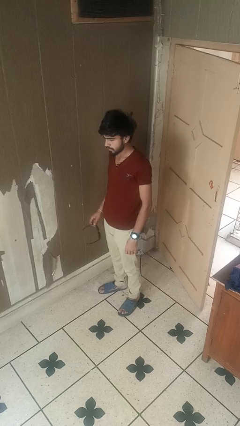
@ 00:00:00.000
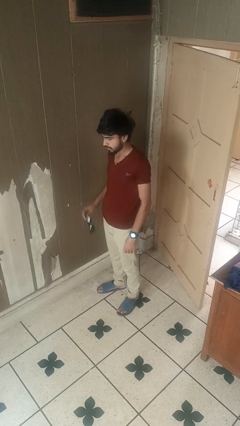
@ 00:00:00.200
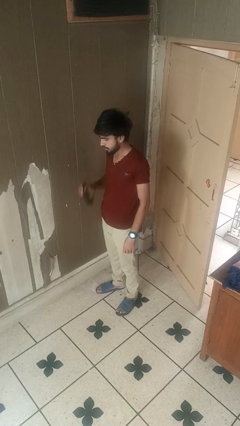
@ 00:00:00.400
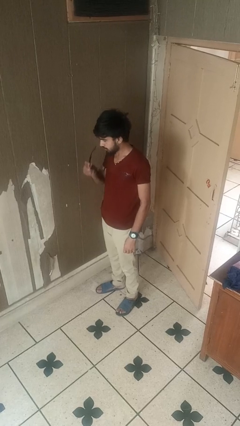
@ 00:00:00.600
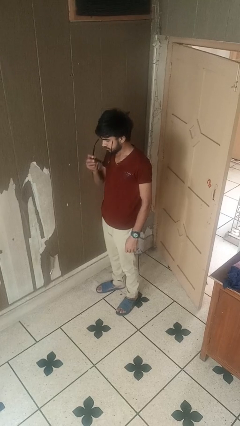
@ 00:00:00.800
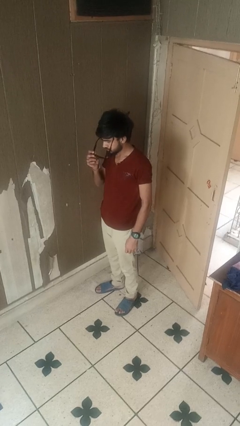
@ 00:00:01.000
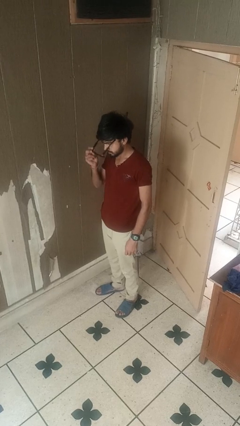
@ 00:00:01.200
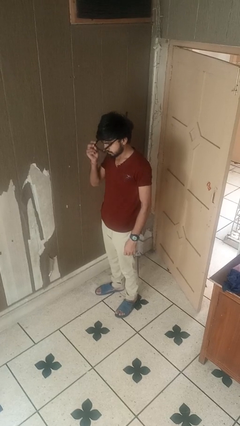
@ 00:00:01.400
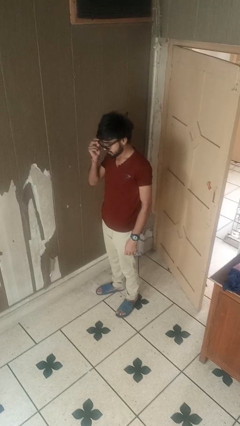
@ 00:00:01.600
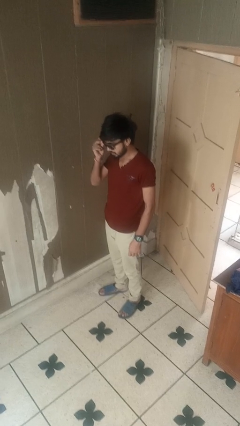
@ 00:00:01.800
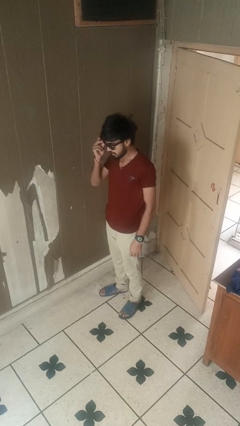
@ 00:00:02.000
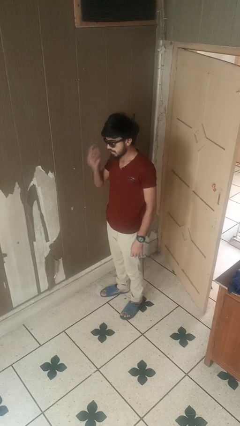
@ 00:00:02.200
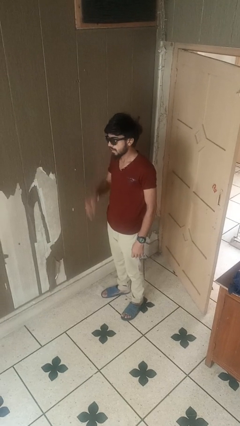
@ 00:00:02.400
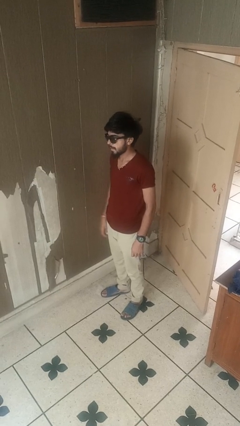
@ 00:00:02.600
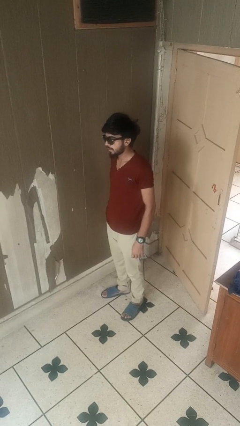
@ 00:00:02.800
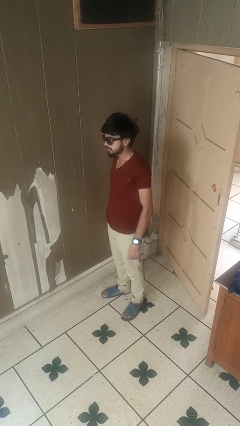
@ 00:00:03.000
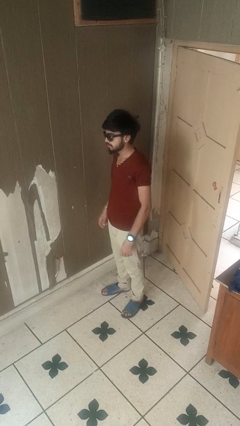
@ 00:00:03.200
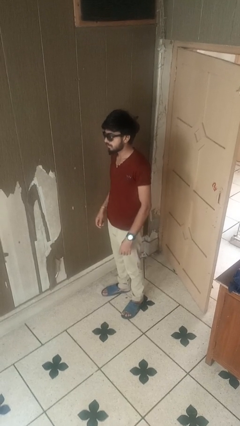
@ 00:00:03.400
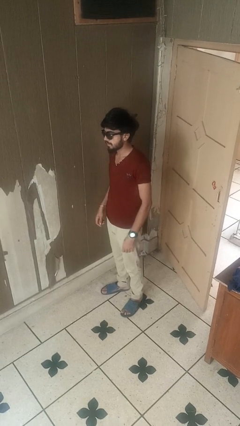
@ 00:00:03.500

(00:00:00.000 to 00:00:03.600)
person puts on sunglasses

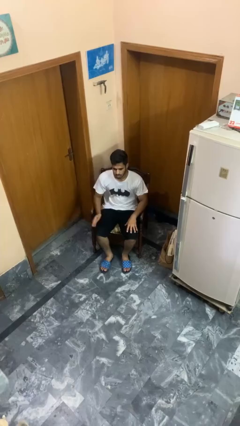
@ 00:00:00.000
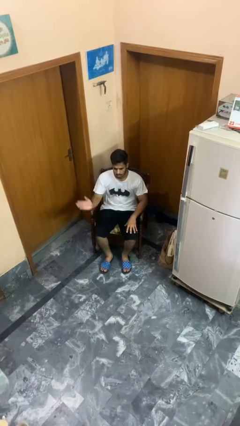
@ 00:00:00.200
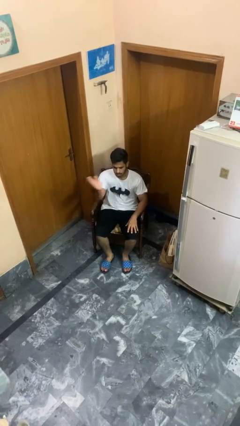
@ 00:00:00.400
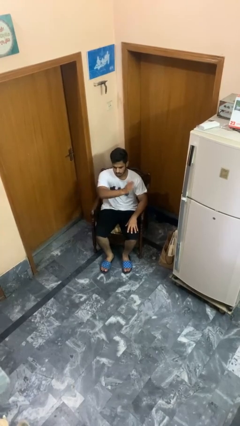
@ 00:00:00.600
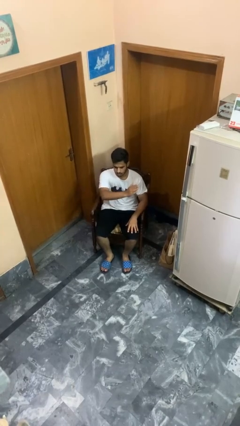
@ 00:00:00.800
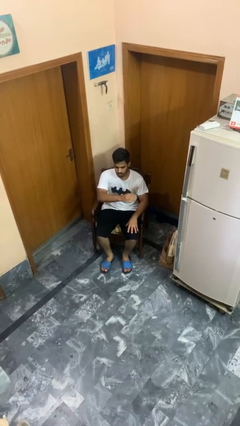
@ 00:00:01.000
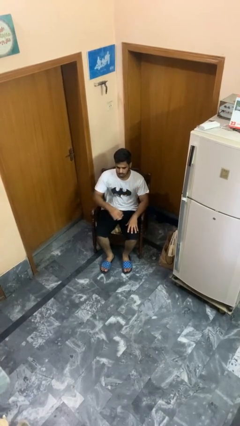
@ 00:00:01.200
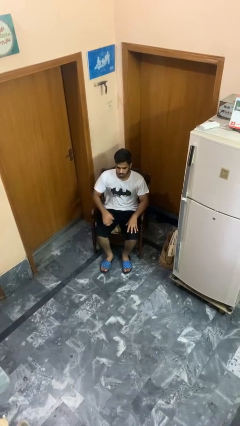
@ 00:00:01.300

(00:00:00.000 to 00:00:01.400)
person gestures swipe left

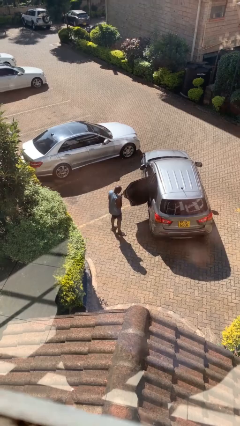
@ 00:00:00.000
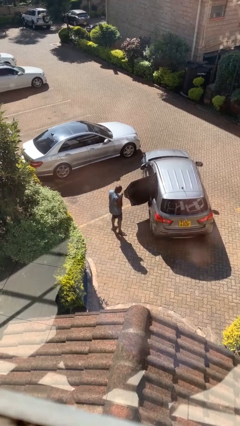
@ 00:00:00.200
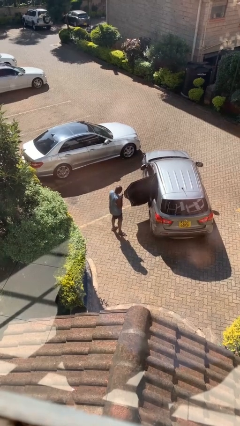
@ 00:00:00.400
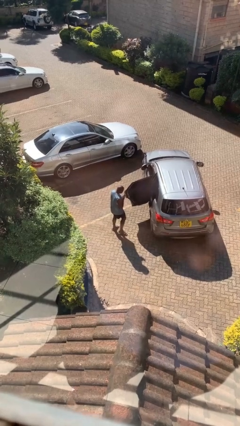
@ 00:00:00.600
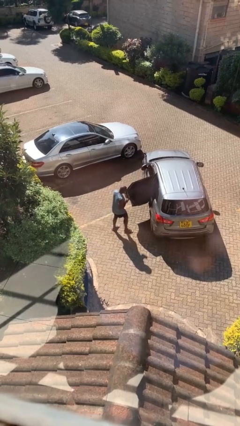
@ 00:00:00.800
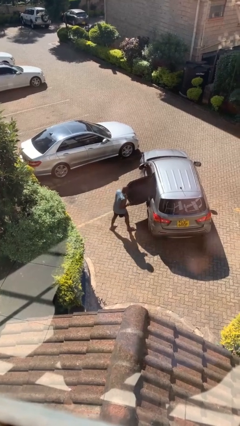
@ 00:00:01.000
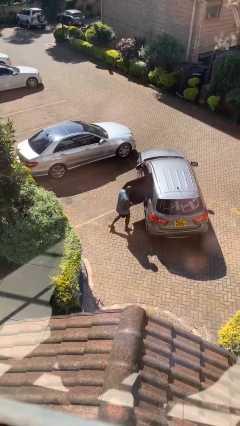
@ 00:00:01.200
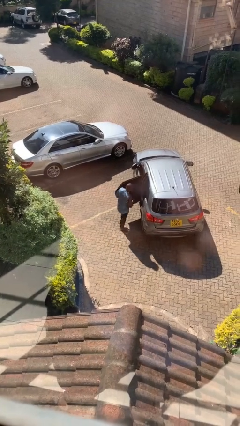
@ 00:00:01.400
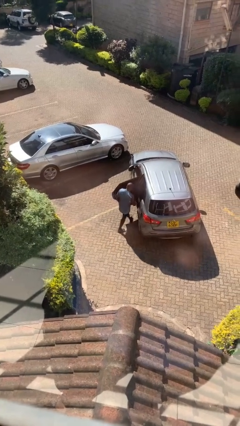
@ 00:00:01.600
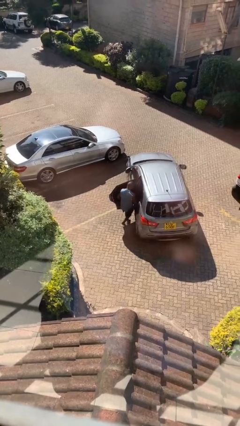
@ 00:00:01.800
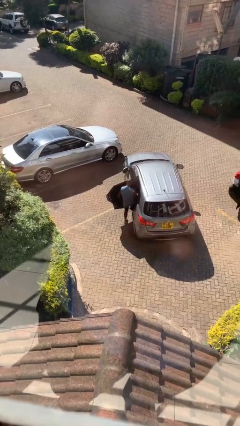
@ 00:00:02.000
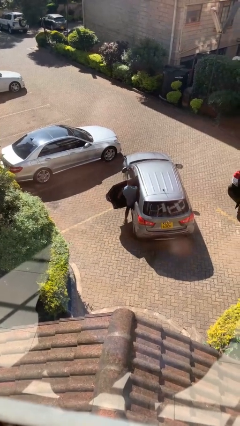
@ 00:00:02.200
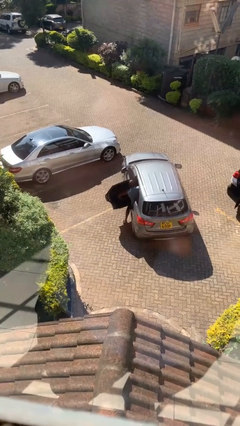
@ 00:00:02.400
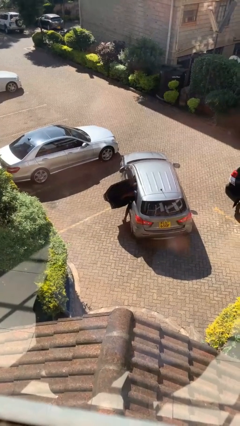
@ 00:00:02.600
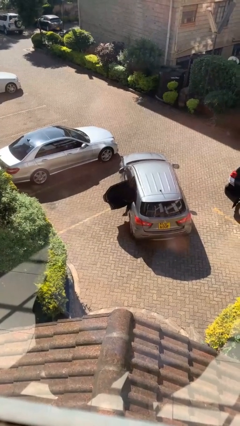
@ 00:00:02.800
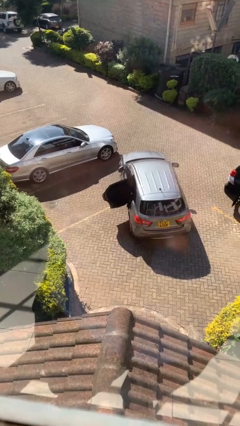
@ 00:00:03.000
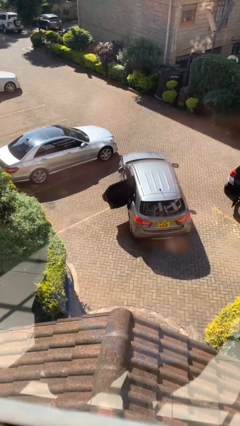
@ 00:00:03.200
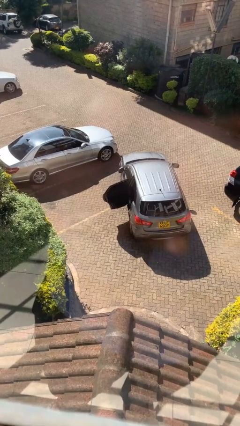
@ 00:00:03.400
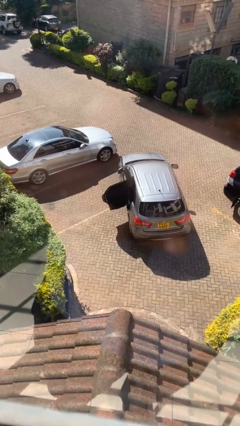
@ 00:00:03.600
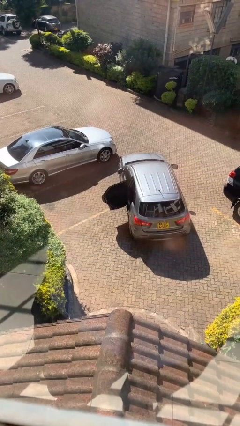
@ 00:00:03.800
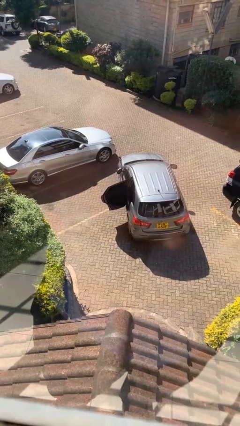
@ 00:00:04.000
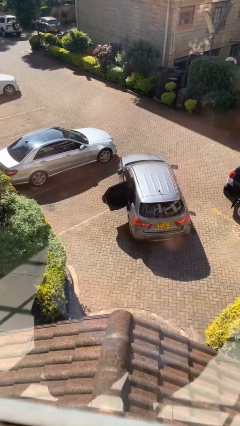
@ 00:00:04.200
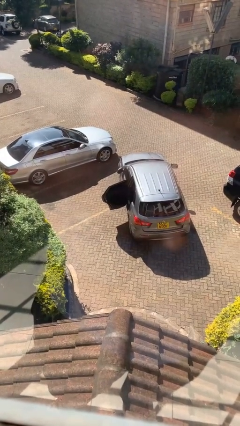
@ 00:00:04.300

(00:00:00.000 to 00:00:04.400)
person enters car

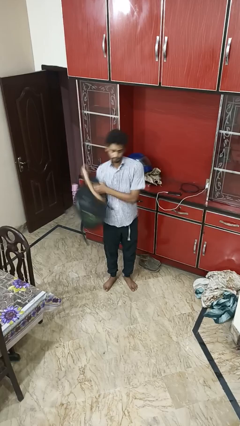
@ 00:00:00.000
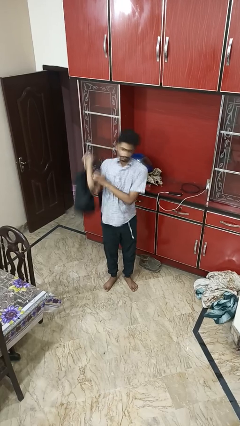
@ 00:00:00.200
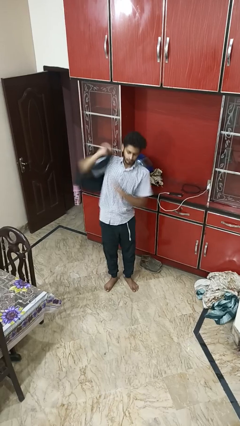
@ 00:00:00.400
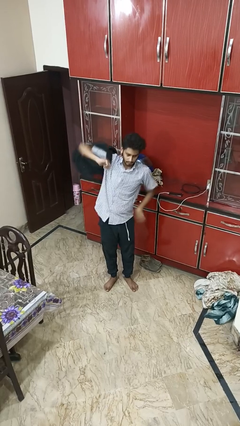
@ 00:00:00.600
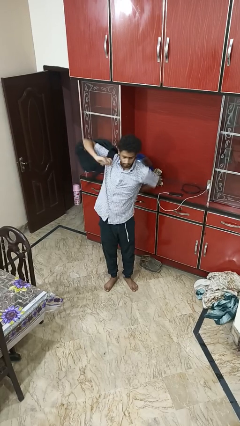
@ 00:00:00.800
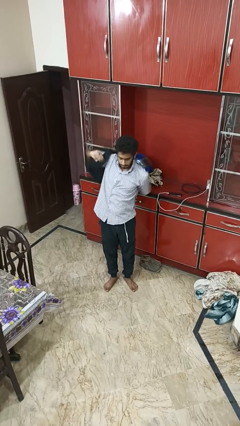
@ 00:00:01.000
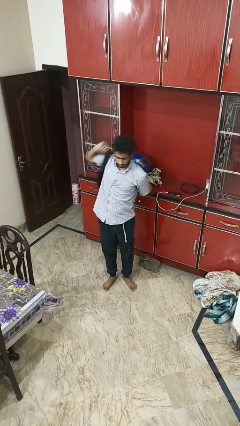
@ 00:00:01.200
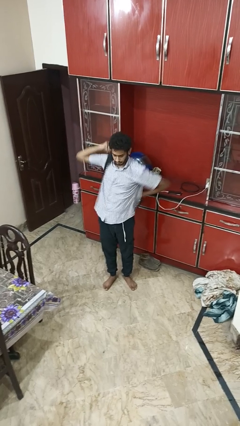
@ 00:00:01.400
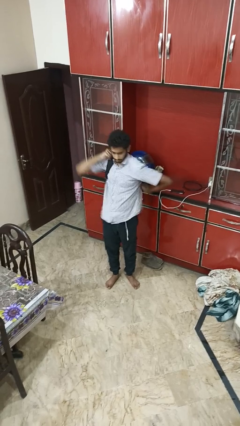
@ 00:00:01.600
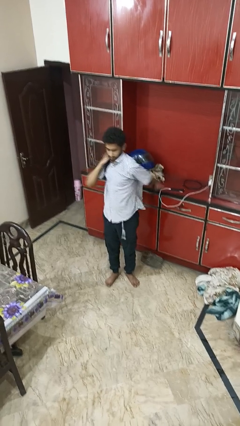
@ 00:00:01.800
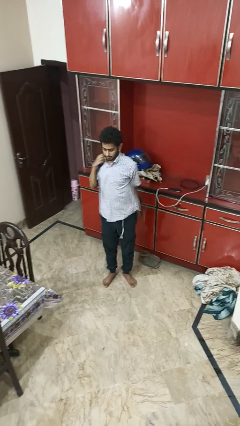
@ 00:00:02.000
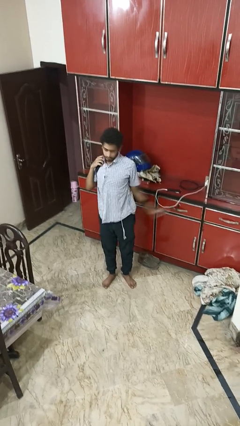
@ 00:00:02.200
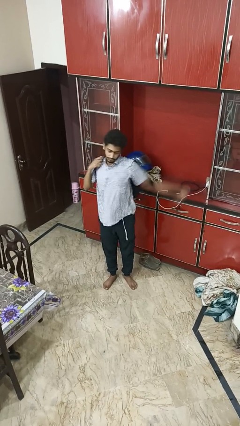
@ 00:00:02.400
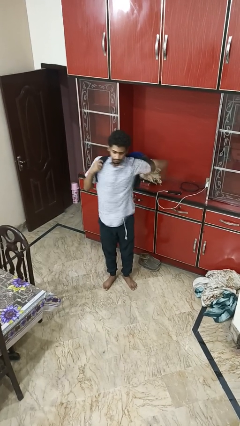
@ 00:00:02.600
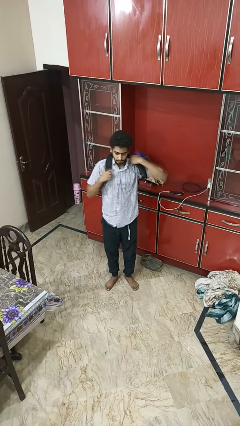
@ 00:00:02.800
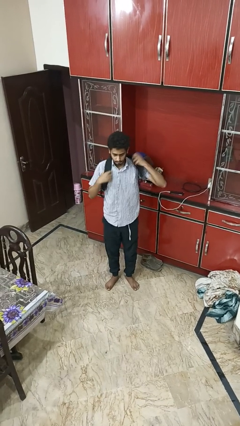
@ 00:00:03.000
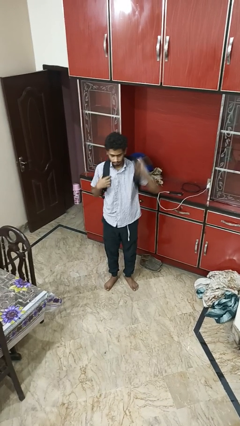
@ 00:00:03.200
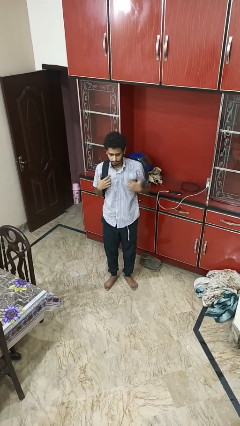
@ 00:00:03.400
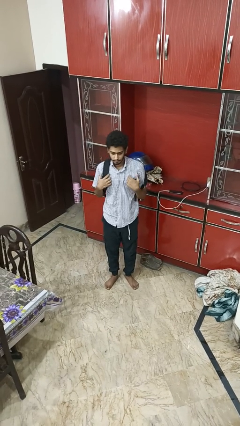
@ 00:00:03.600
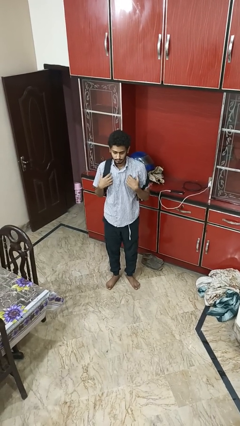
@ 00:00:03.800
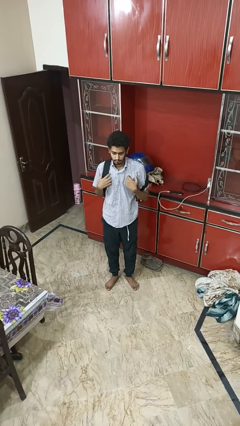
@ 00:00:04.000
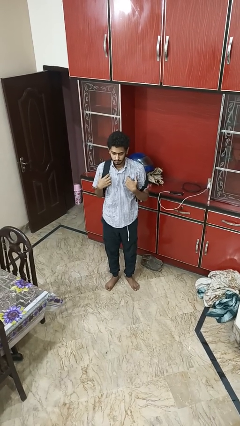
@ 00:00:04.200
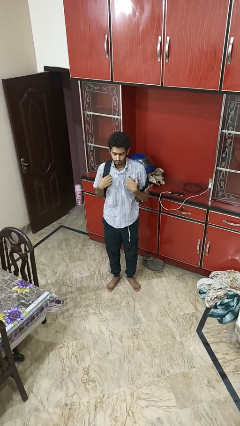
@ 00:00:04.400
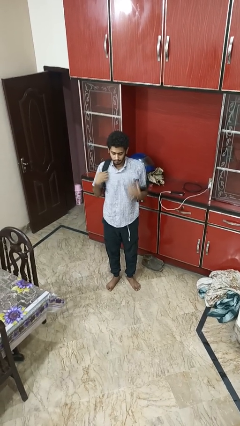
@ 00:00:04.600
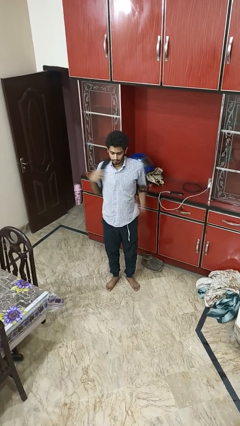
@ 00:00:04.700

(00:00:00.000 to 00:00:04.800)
person puts on backpack

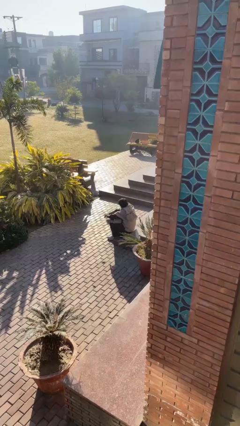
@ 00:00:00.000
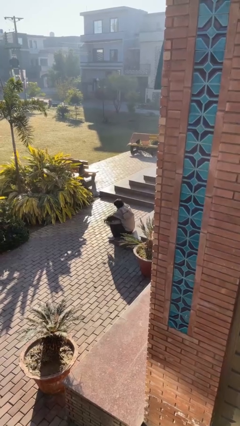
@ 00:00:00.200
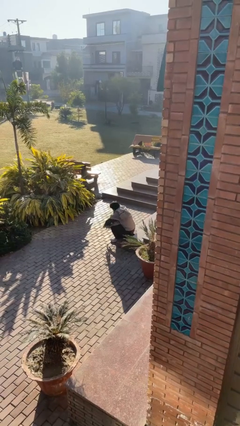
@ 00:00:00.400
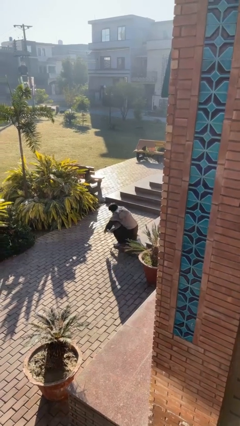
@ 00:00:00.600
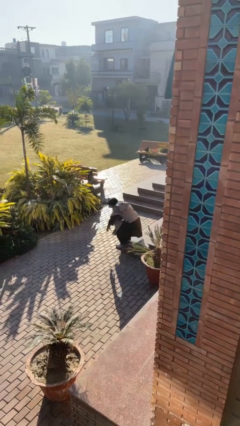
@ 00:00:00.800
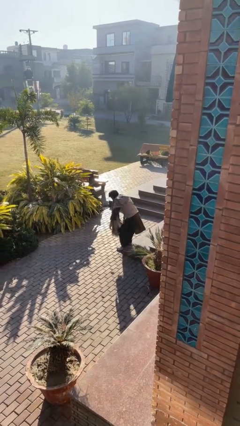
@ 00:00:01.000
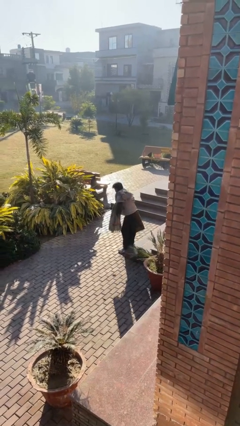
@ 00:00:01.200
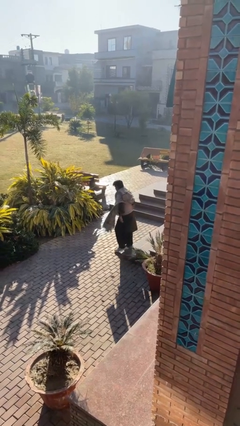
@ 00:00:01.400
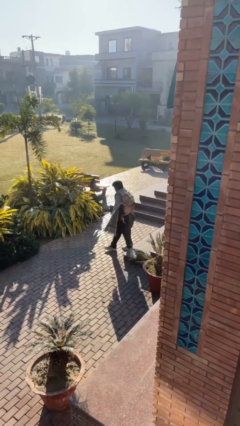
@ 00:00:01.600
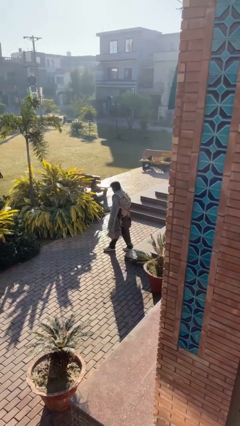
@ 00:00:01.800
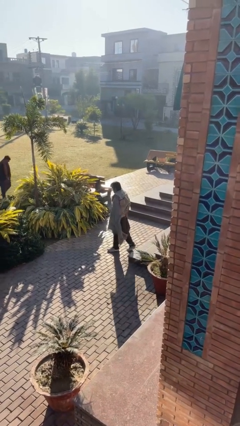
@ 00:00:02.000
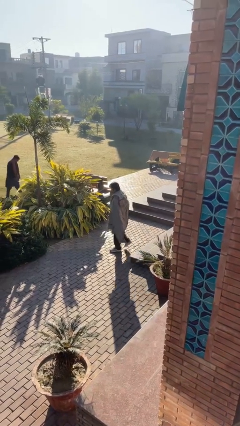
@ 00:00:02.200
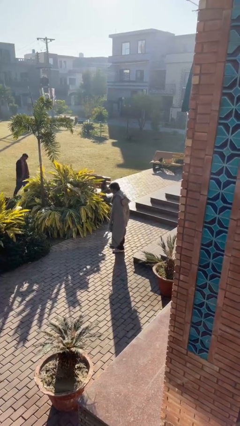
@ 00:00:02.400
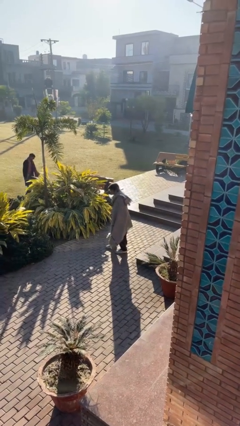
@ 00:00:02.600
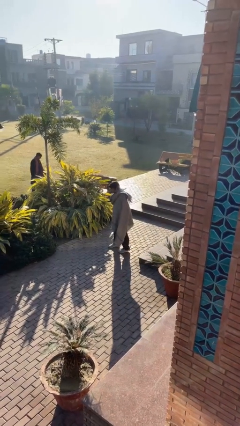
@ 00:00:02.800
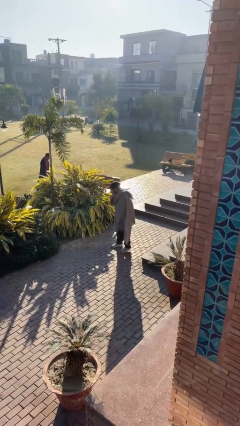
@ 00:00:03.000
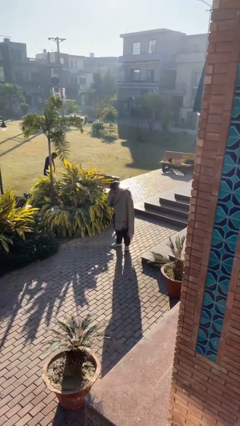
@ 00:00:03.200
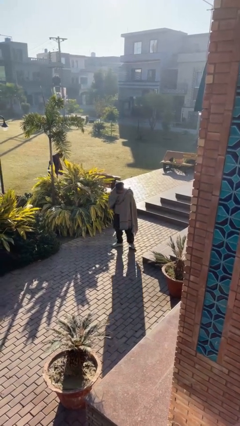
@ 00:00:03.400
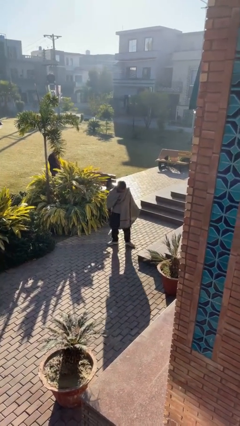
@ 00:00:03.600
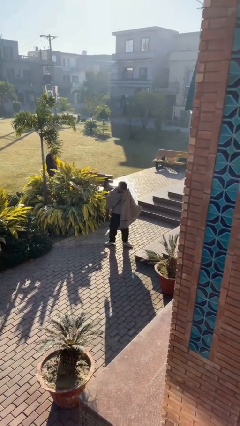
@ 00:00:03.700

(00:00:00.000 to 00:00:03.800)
person stands up
